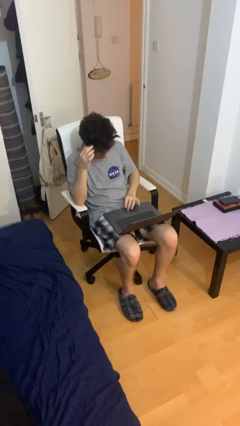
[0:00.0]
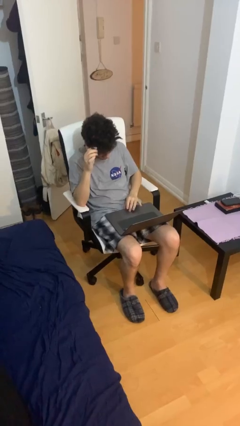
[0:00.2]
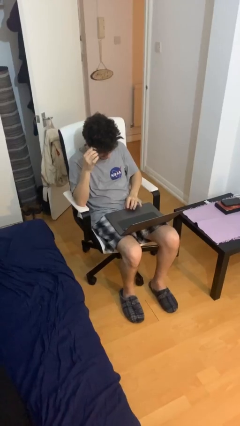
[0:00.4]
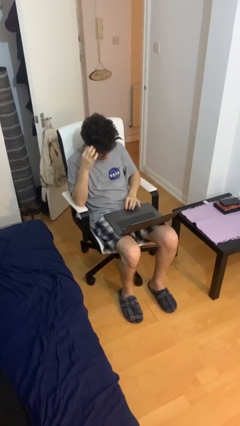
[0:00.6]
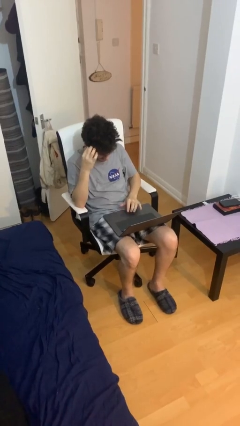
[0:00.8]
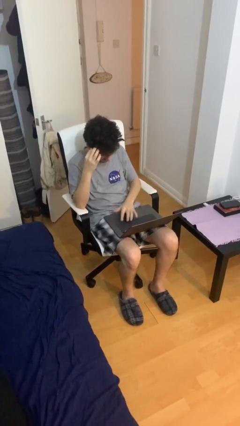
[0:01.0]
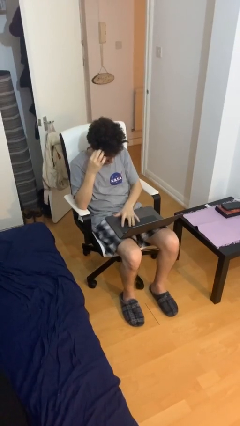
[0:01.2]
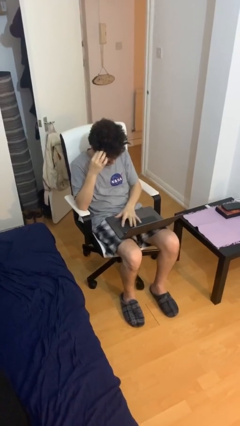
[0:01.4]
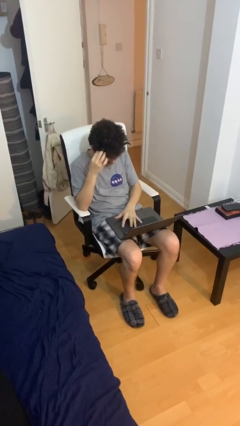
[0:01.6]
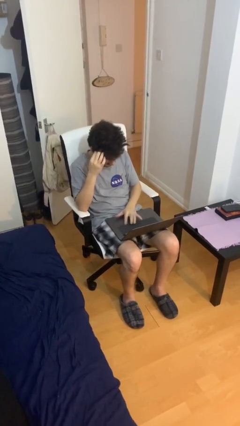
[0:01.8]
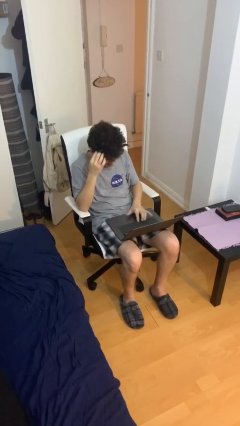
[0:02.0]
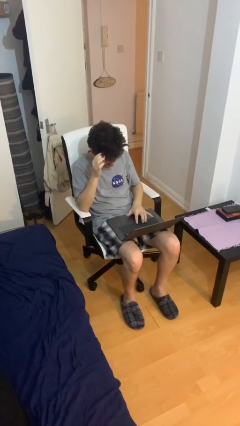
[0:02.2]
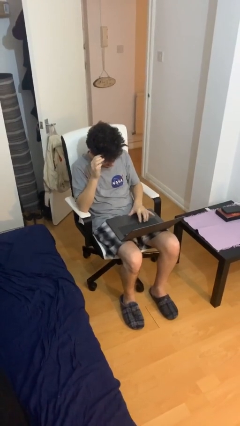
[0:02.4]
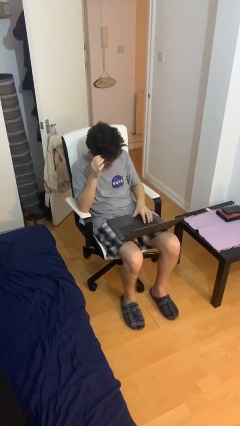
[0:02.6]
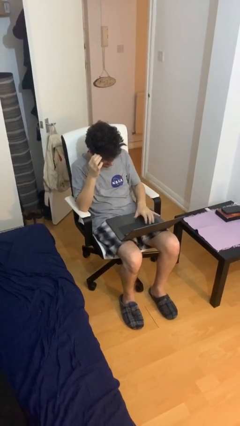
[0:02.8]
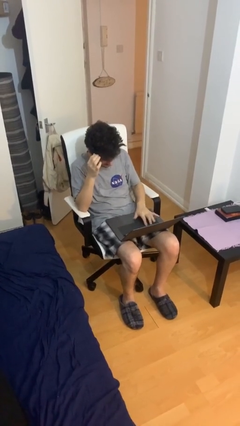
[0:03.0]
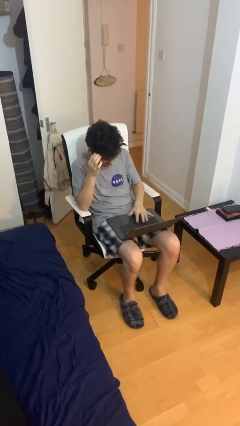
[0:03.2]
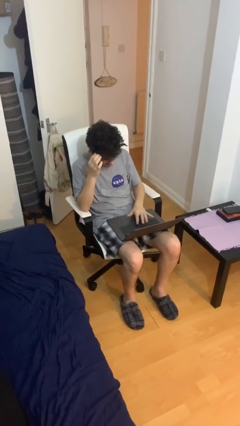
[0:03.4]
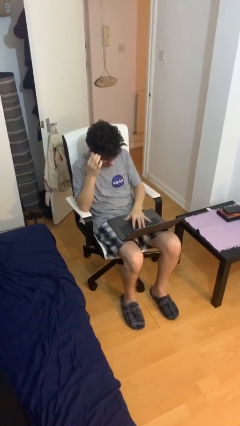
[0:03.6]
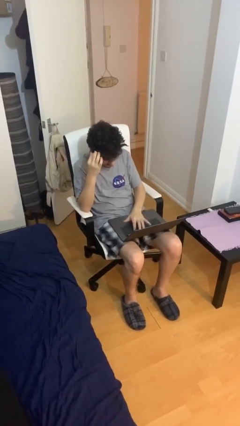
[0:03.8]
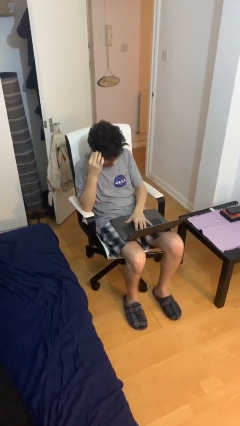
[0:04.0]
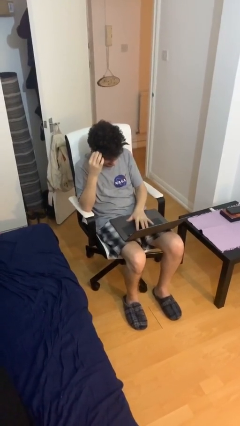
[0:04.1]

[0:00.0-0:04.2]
person interacts with laptop

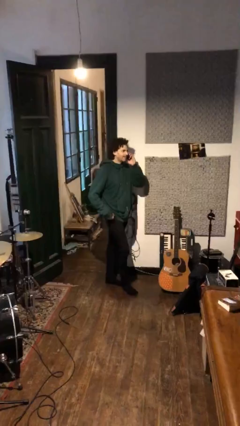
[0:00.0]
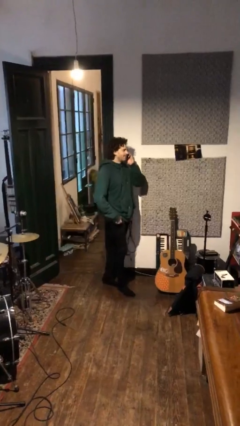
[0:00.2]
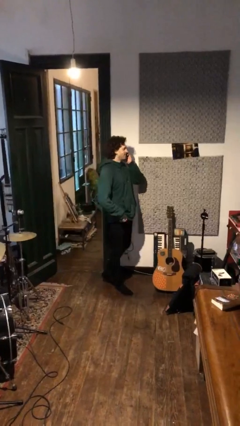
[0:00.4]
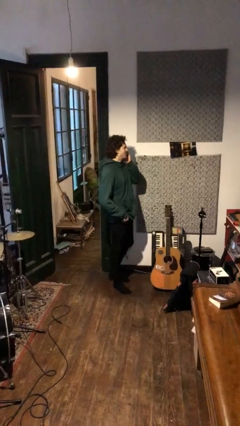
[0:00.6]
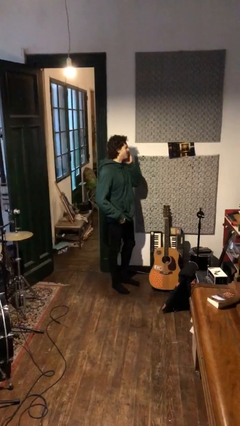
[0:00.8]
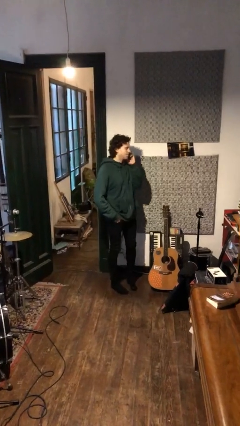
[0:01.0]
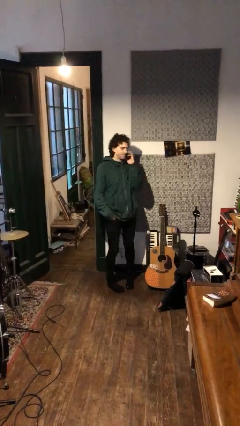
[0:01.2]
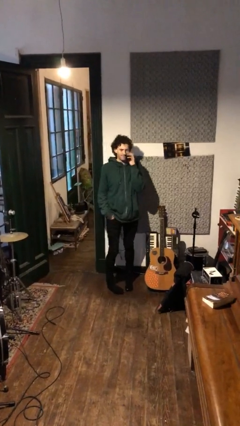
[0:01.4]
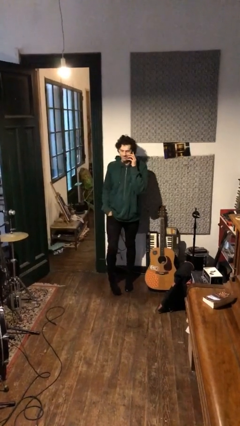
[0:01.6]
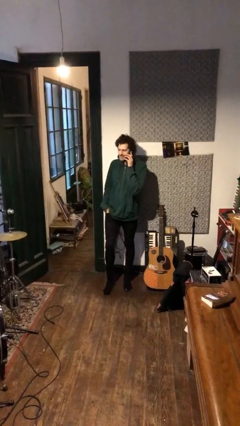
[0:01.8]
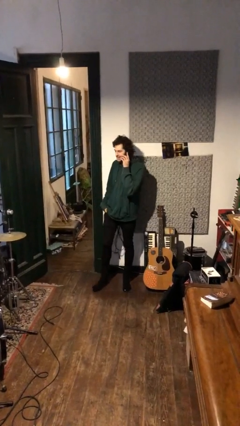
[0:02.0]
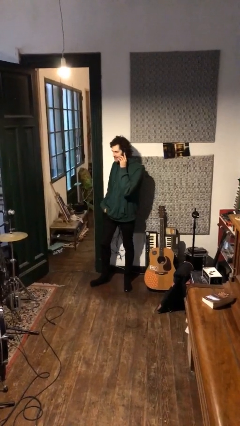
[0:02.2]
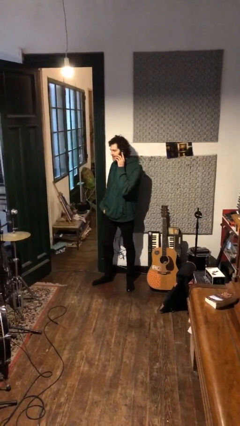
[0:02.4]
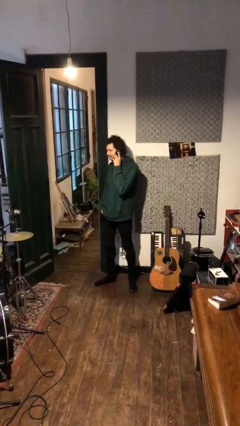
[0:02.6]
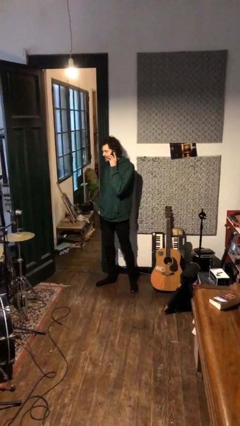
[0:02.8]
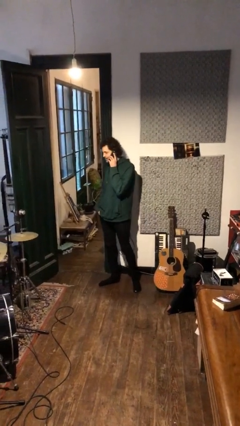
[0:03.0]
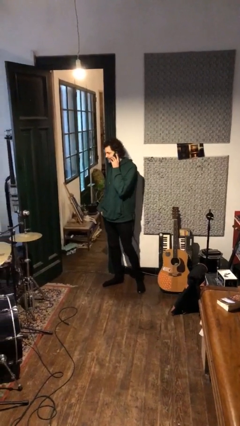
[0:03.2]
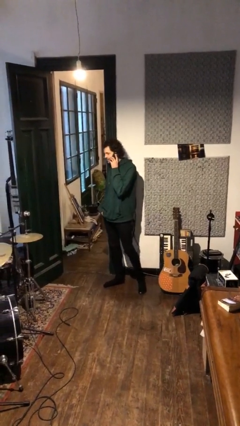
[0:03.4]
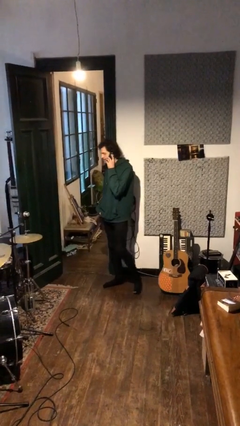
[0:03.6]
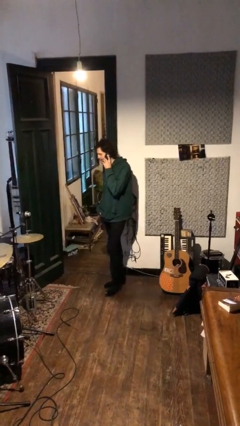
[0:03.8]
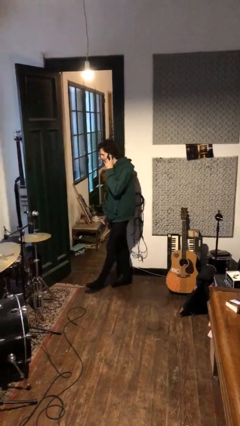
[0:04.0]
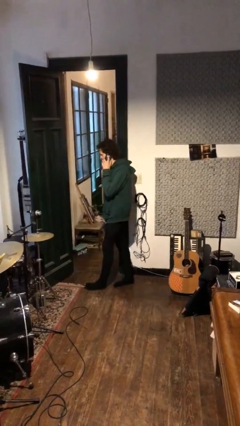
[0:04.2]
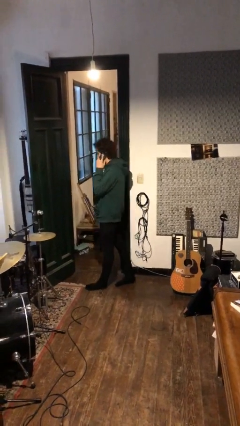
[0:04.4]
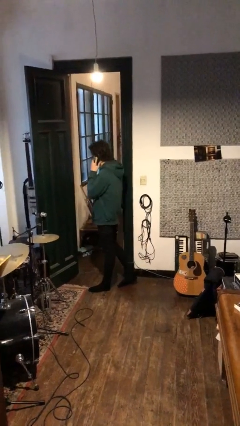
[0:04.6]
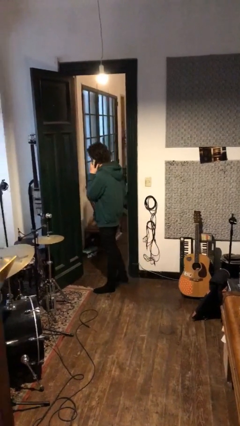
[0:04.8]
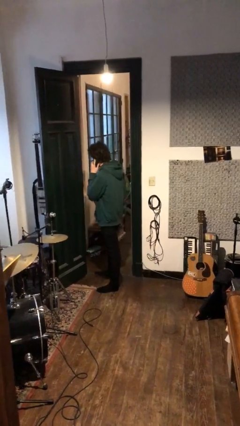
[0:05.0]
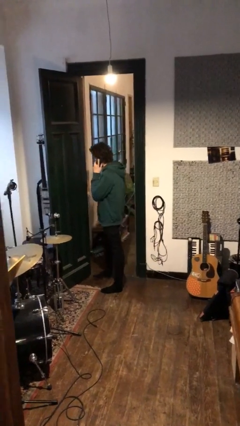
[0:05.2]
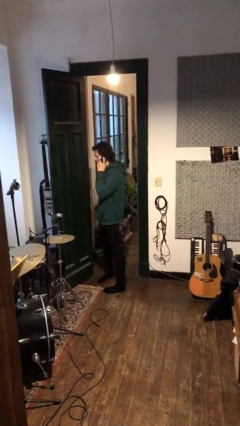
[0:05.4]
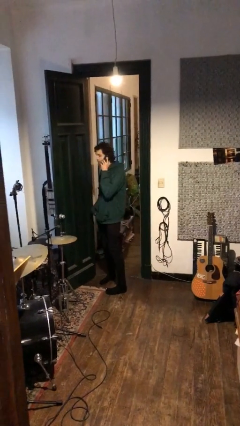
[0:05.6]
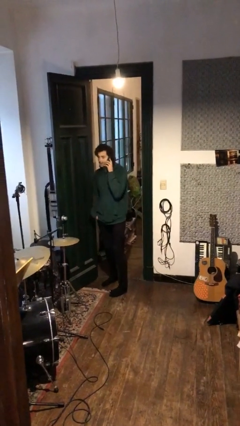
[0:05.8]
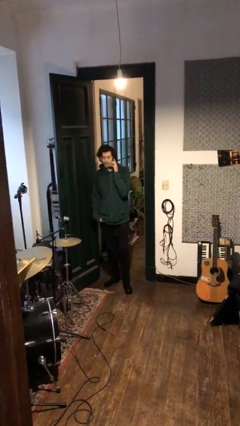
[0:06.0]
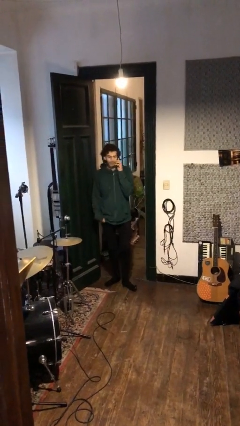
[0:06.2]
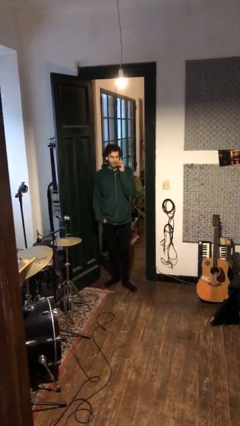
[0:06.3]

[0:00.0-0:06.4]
person talks on phone

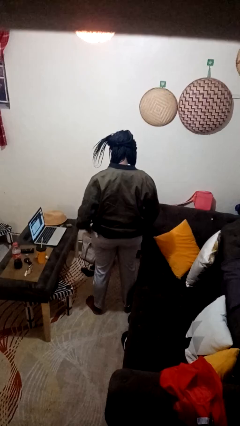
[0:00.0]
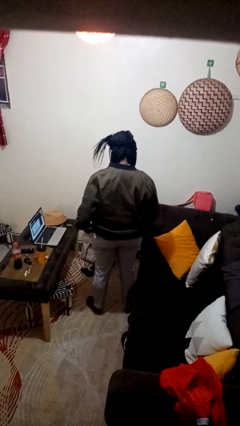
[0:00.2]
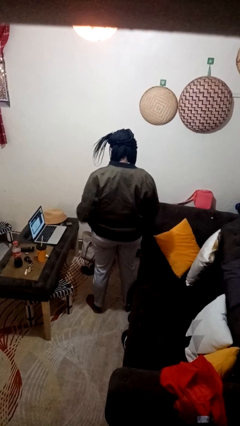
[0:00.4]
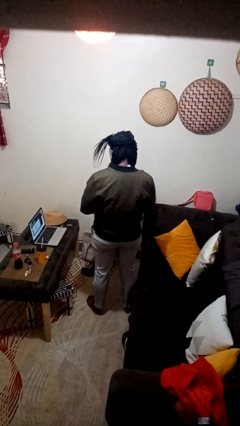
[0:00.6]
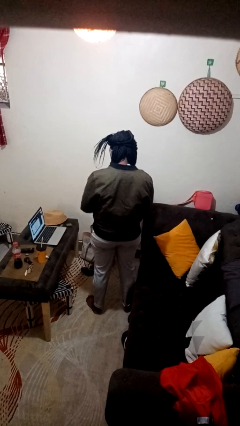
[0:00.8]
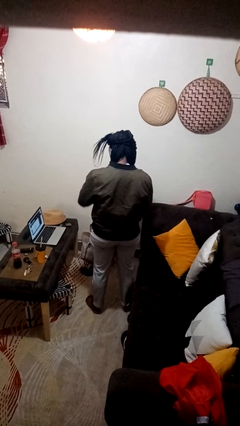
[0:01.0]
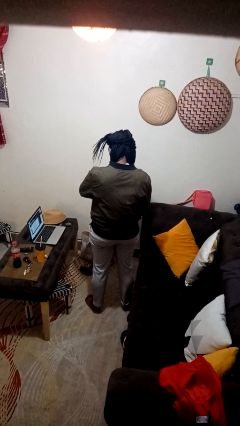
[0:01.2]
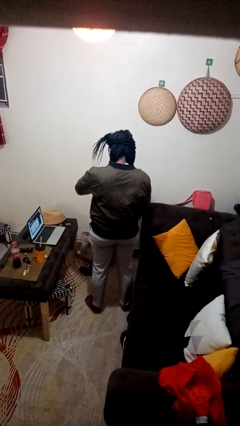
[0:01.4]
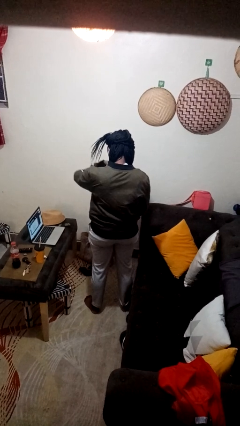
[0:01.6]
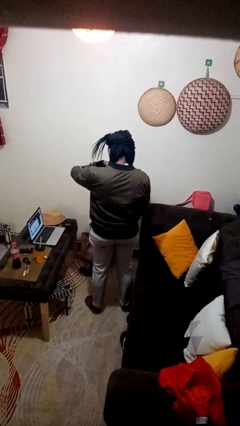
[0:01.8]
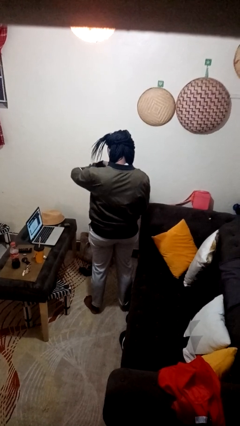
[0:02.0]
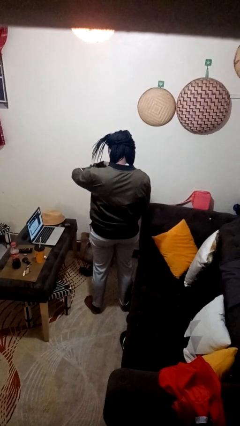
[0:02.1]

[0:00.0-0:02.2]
person zips up jacket

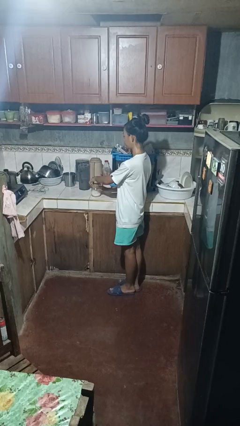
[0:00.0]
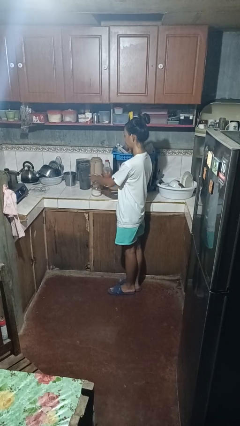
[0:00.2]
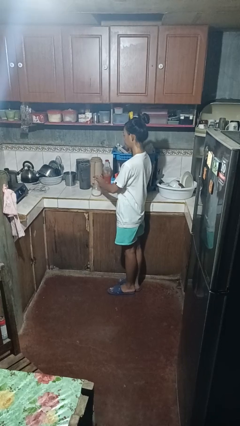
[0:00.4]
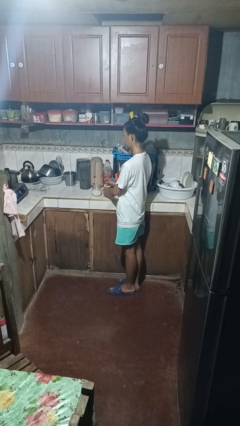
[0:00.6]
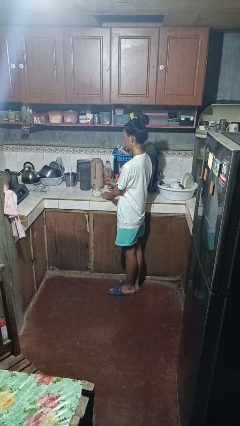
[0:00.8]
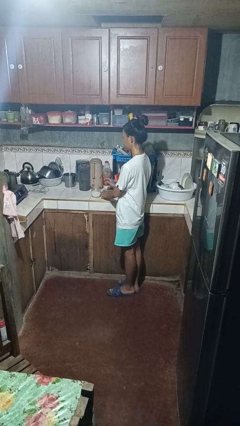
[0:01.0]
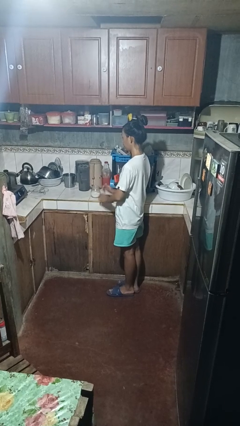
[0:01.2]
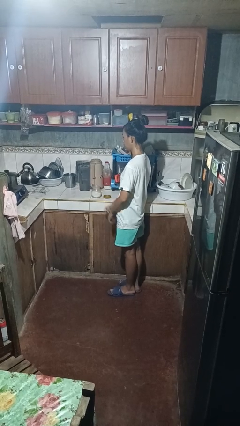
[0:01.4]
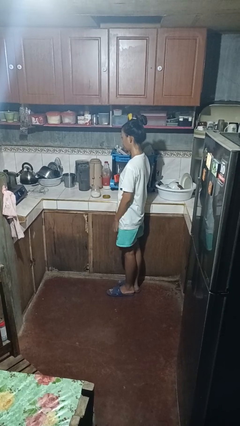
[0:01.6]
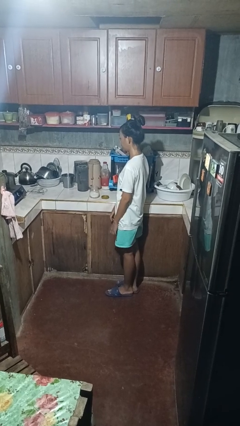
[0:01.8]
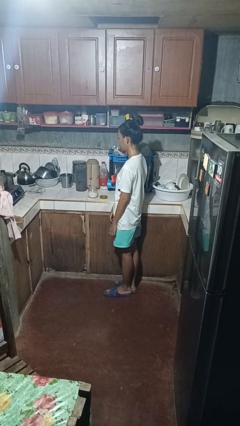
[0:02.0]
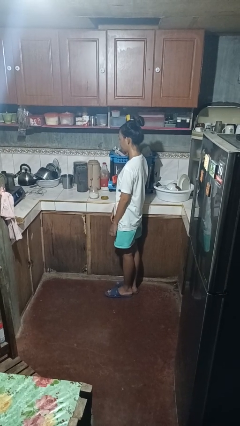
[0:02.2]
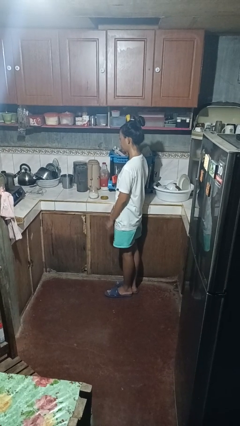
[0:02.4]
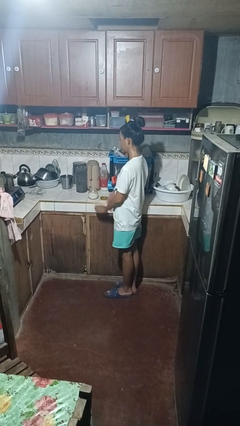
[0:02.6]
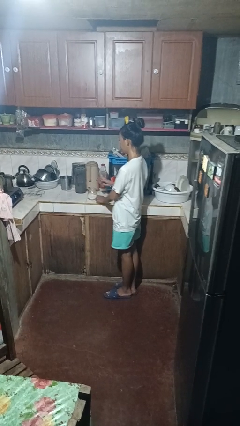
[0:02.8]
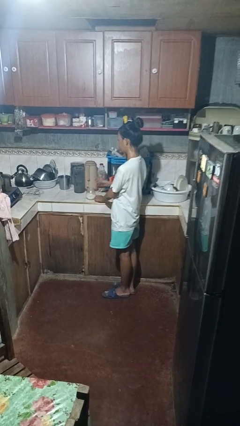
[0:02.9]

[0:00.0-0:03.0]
person unscrews lid from bottle

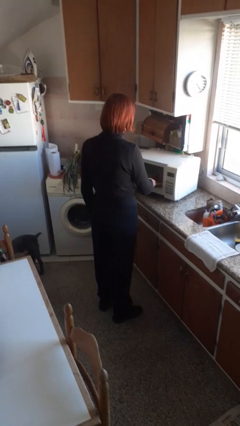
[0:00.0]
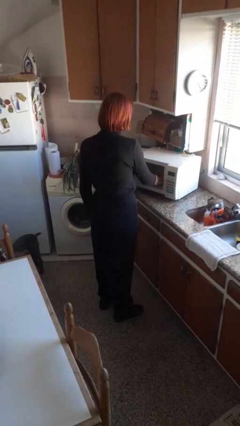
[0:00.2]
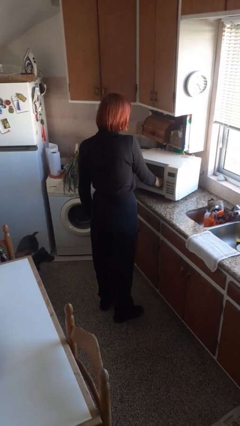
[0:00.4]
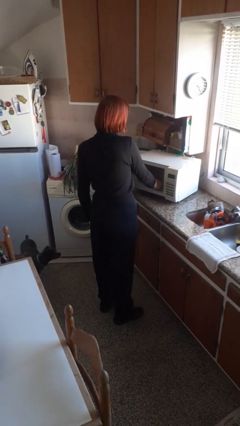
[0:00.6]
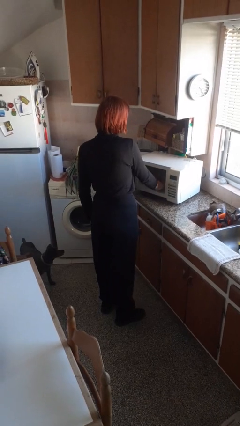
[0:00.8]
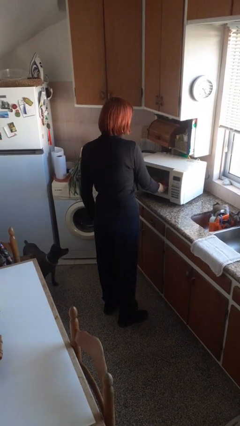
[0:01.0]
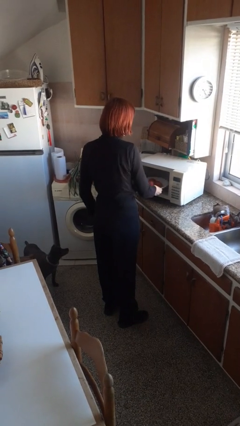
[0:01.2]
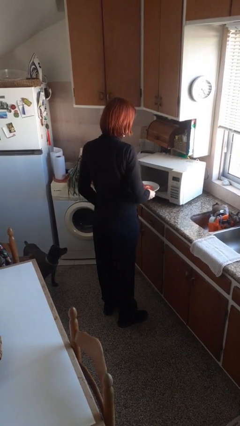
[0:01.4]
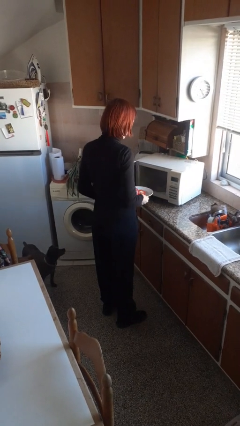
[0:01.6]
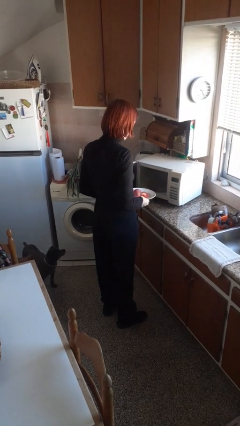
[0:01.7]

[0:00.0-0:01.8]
person takes object from microwave
